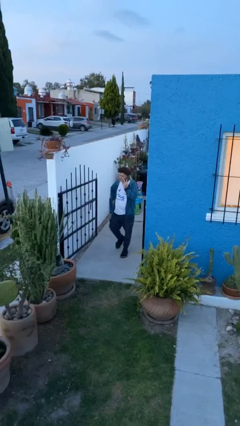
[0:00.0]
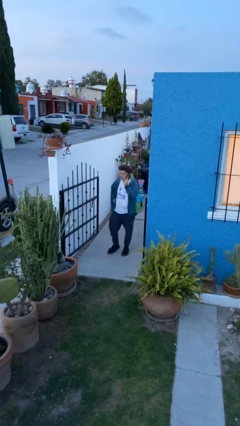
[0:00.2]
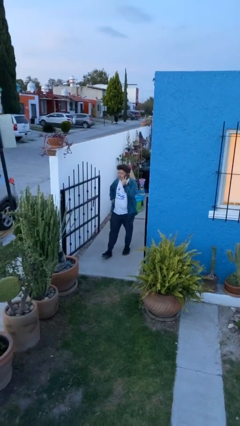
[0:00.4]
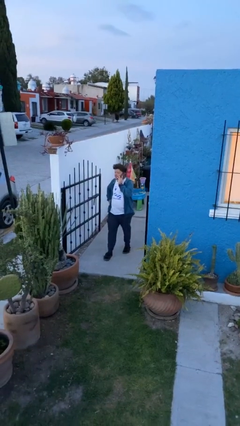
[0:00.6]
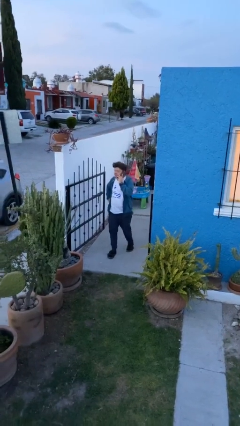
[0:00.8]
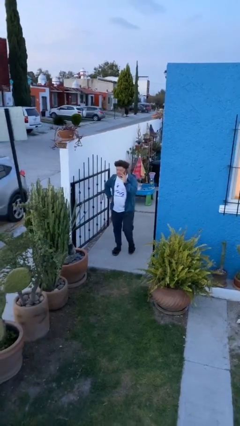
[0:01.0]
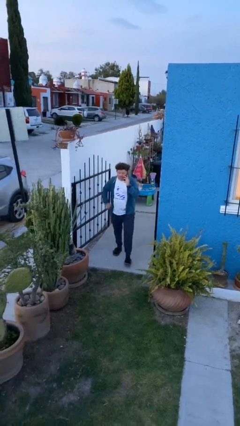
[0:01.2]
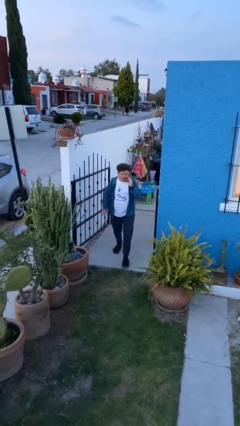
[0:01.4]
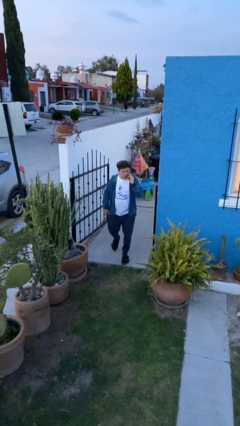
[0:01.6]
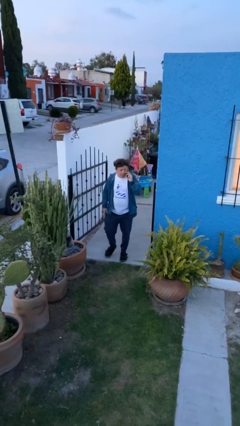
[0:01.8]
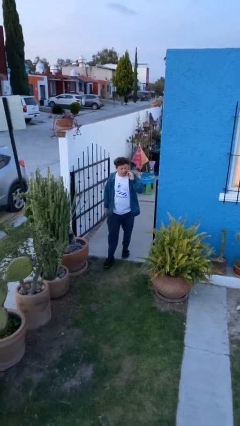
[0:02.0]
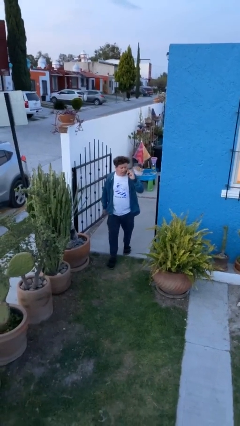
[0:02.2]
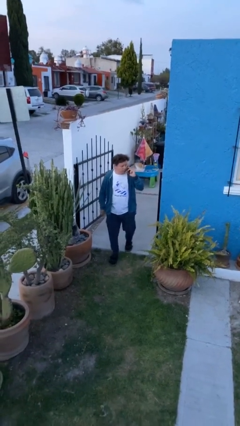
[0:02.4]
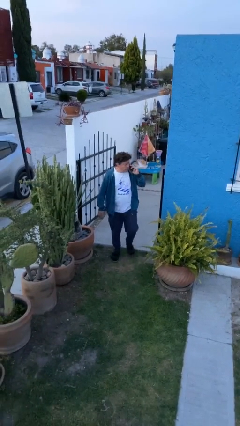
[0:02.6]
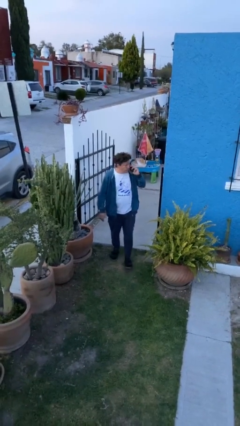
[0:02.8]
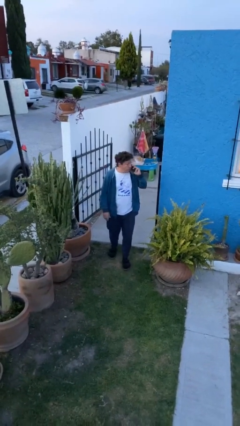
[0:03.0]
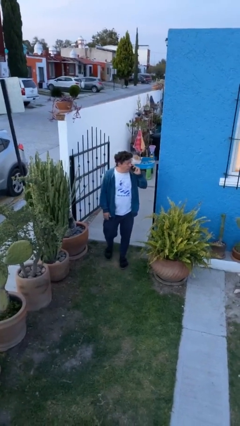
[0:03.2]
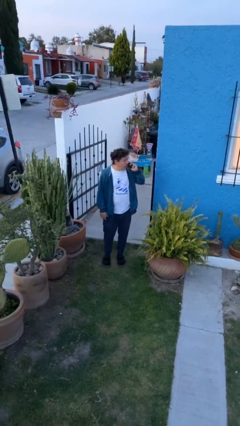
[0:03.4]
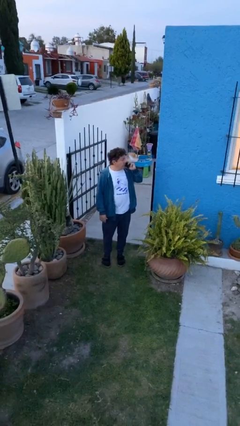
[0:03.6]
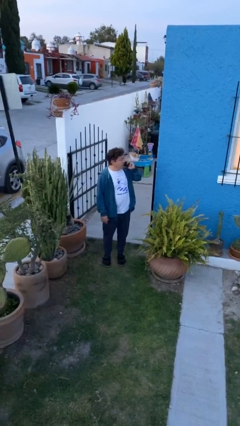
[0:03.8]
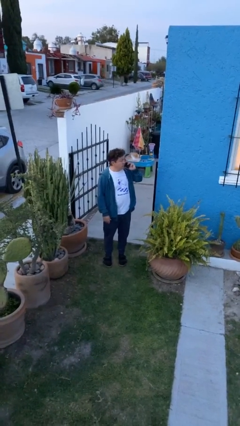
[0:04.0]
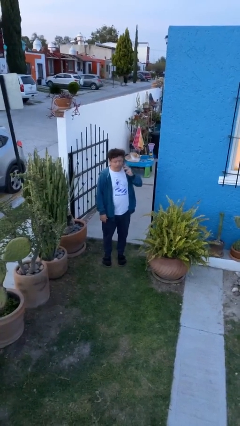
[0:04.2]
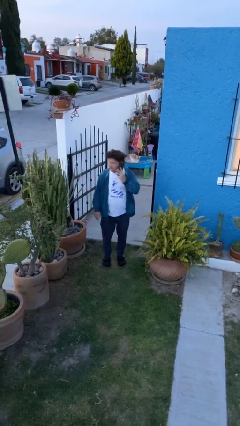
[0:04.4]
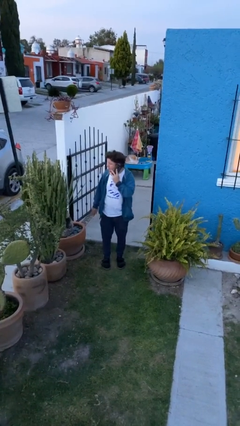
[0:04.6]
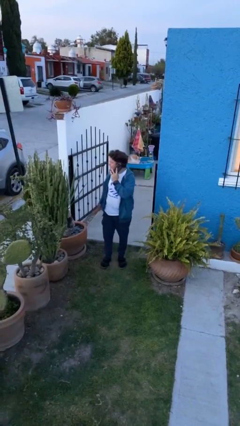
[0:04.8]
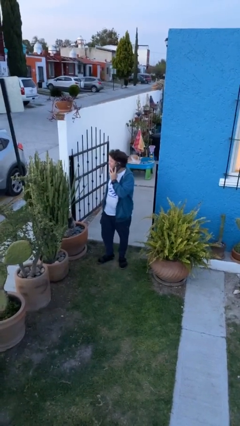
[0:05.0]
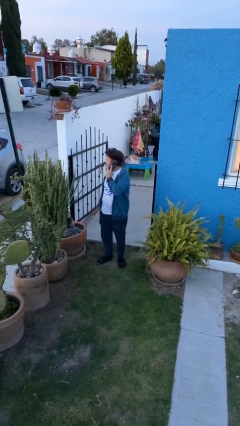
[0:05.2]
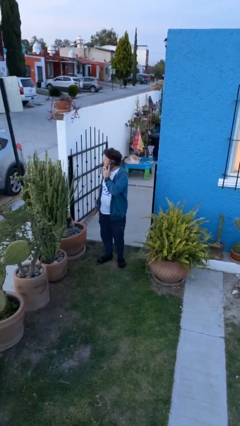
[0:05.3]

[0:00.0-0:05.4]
person enters scene through structure

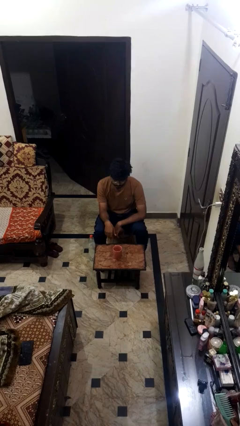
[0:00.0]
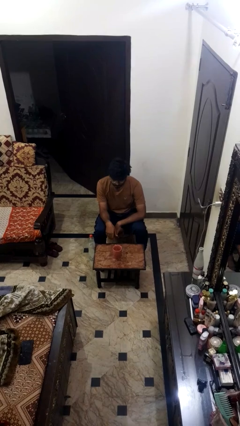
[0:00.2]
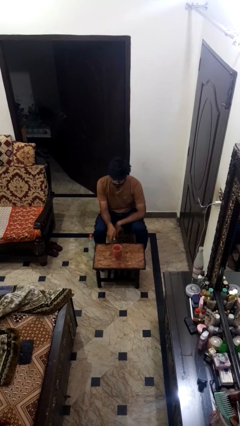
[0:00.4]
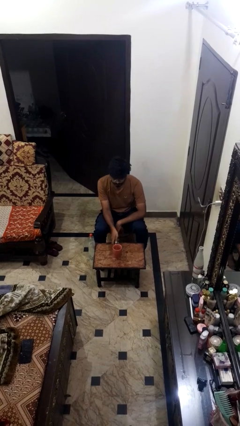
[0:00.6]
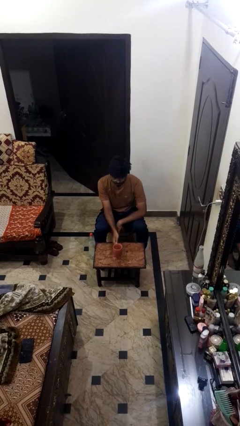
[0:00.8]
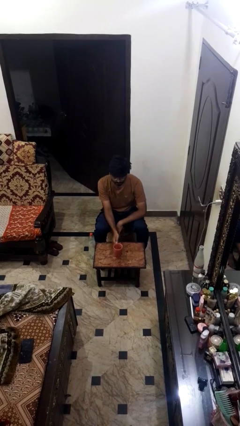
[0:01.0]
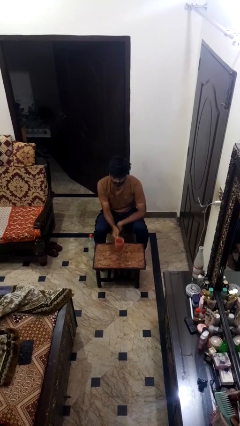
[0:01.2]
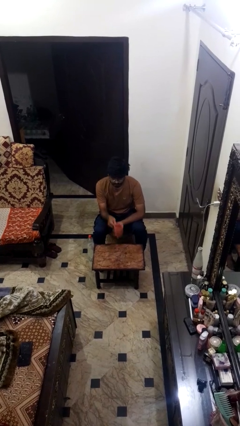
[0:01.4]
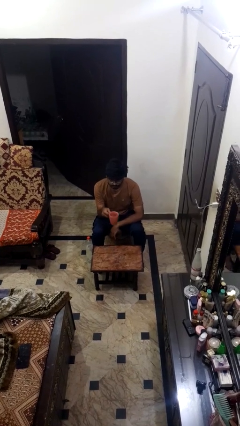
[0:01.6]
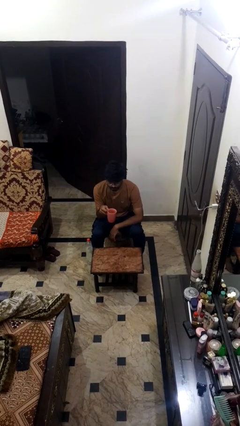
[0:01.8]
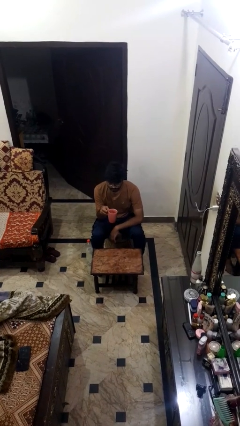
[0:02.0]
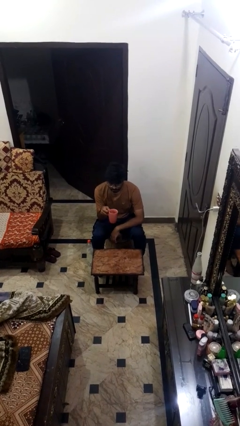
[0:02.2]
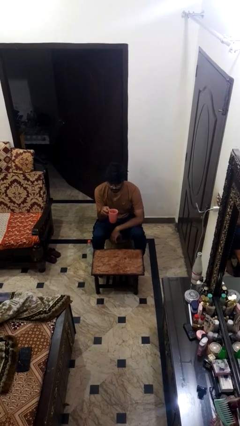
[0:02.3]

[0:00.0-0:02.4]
person picks up object from table

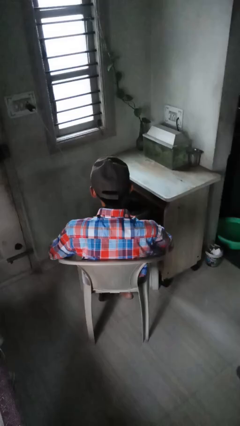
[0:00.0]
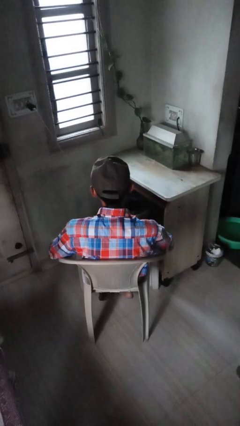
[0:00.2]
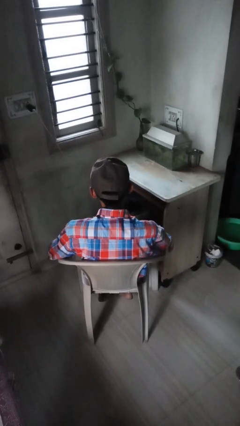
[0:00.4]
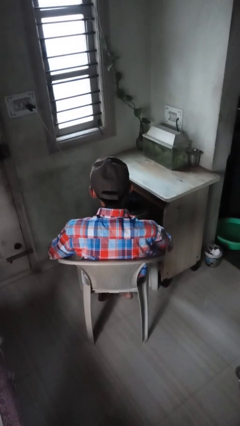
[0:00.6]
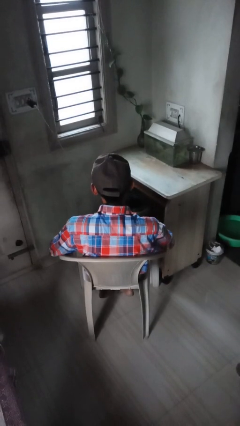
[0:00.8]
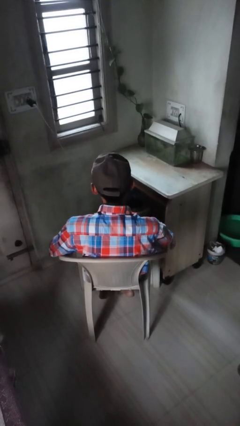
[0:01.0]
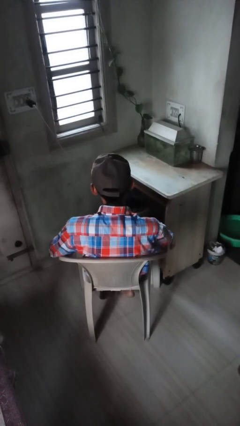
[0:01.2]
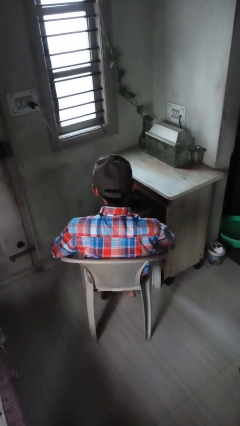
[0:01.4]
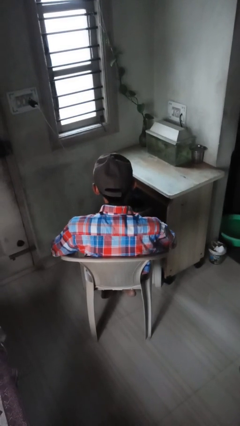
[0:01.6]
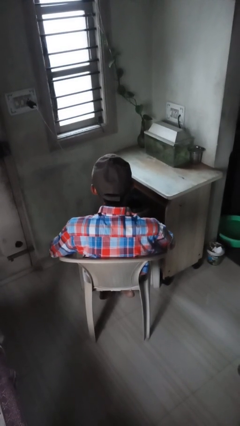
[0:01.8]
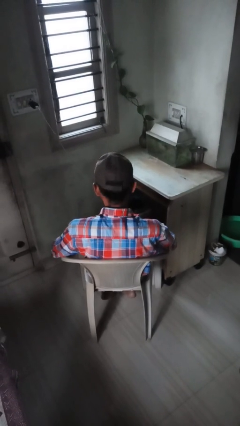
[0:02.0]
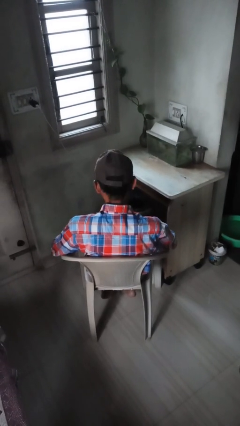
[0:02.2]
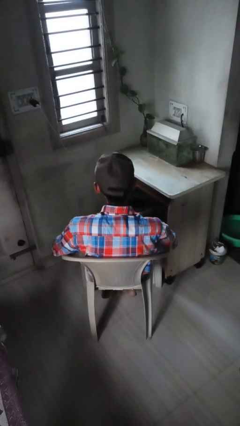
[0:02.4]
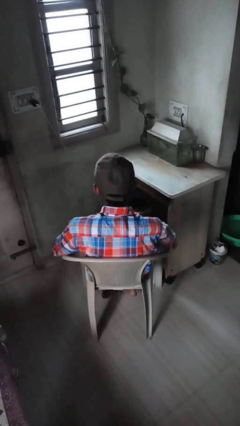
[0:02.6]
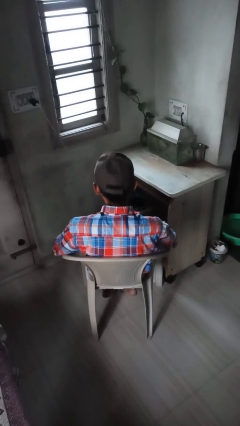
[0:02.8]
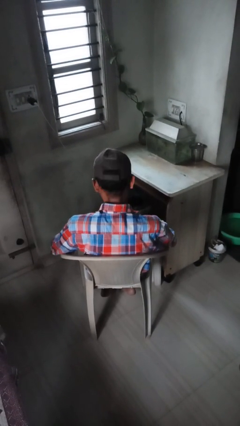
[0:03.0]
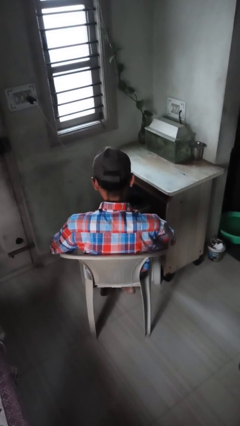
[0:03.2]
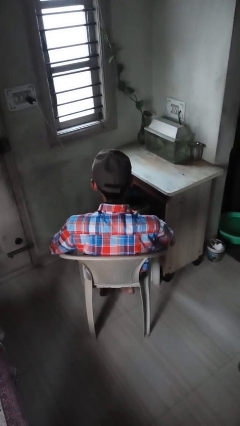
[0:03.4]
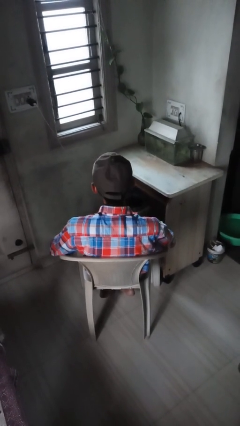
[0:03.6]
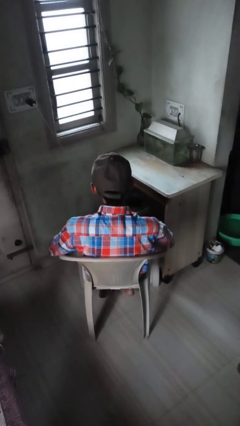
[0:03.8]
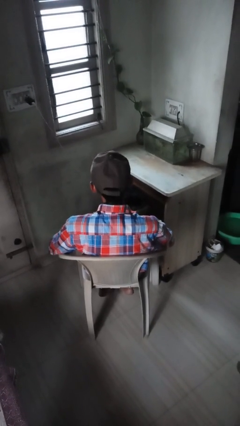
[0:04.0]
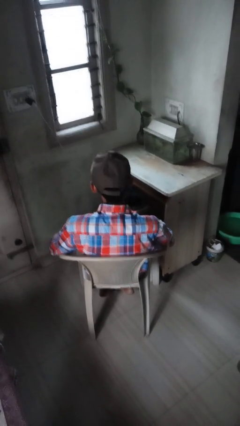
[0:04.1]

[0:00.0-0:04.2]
person nods head

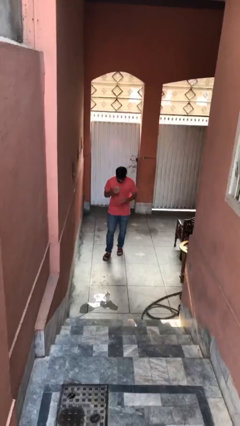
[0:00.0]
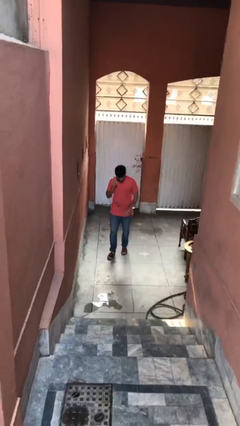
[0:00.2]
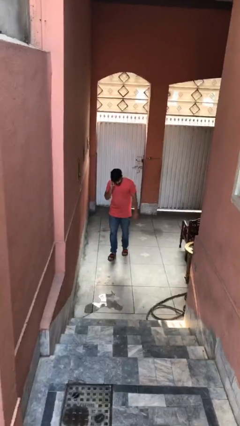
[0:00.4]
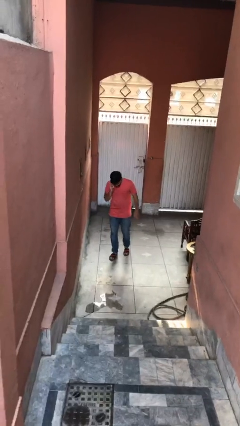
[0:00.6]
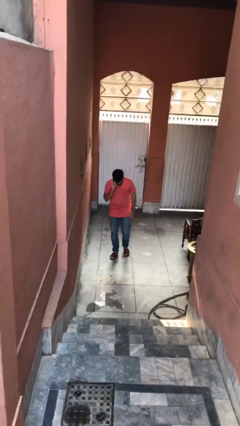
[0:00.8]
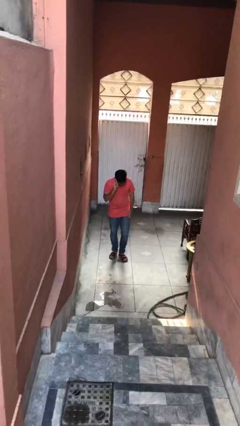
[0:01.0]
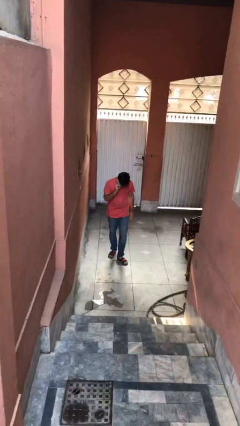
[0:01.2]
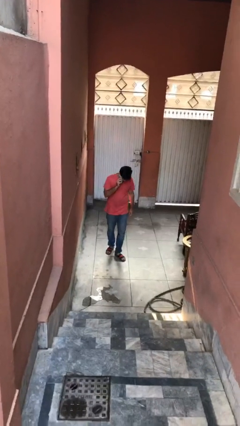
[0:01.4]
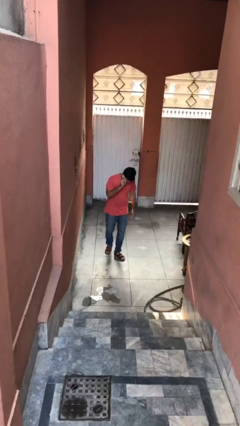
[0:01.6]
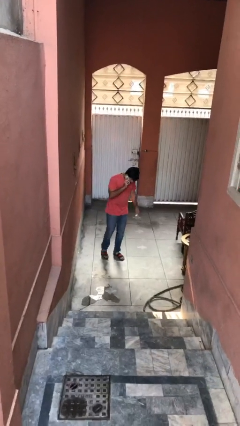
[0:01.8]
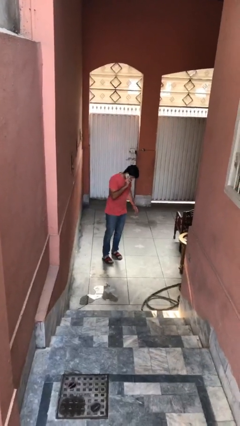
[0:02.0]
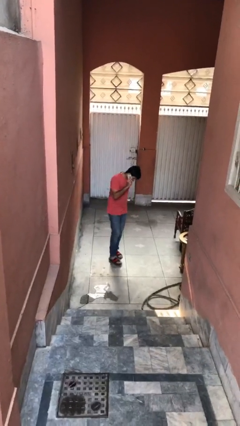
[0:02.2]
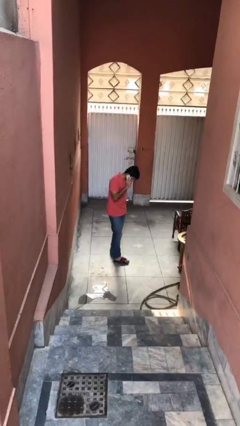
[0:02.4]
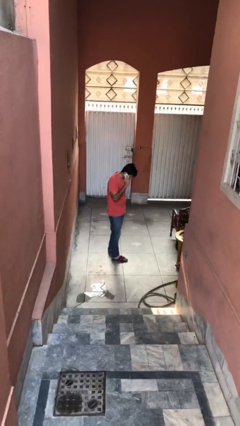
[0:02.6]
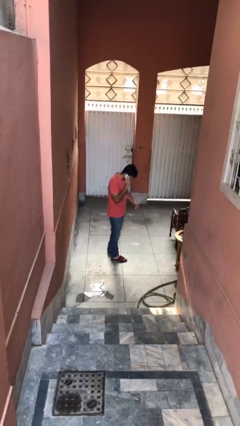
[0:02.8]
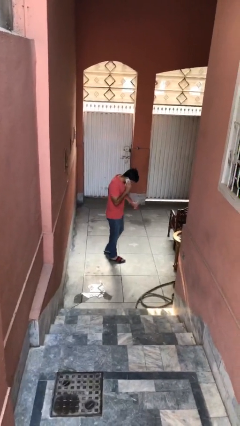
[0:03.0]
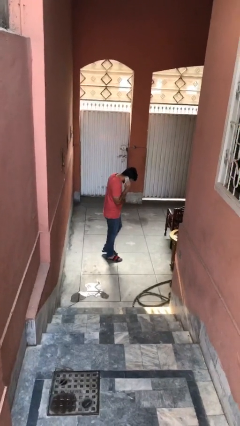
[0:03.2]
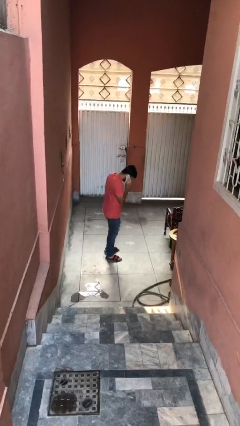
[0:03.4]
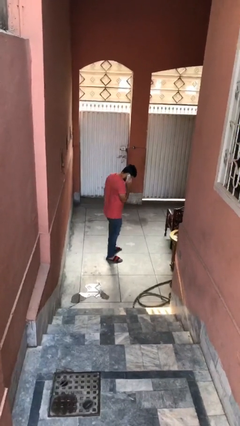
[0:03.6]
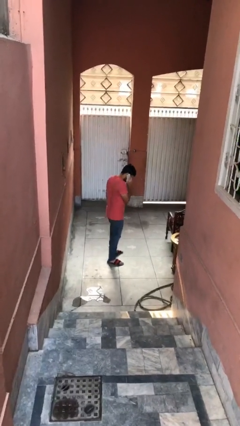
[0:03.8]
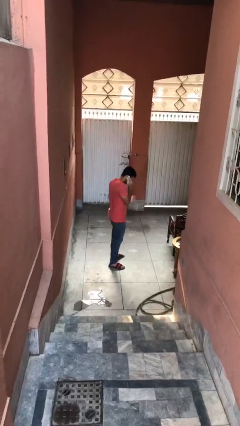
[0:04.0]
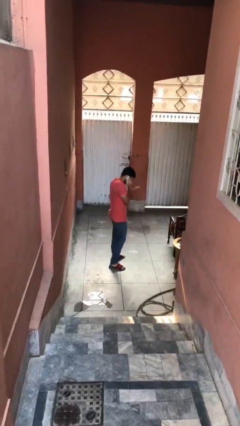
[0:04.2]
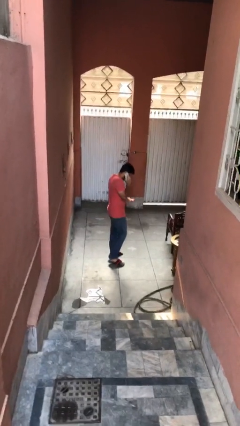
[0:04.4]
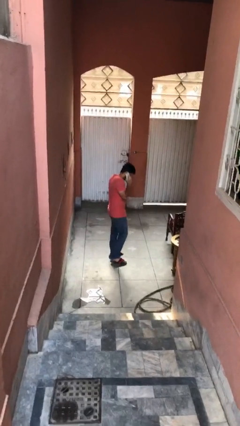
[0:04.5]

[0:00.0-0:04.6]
person talks on phone

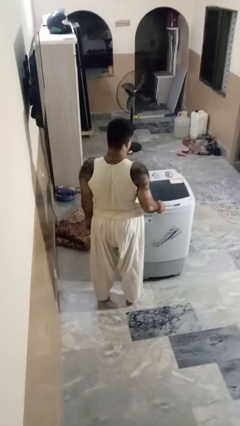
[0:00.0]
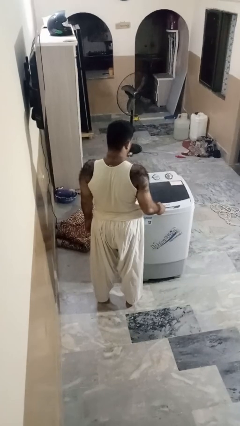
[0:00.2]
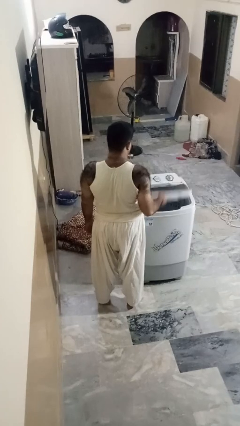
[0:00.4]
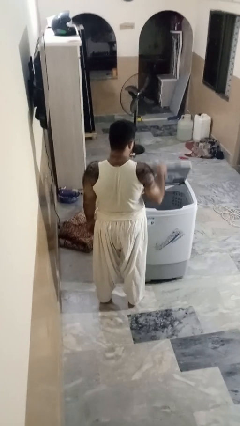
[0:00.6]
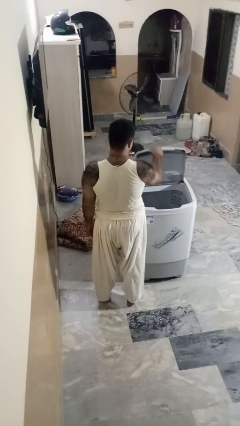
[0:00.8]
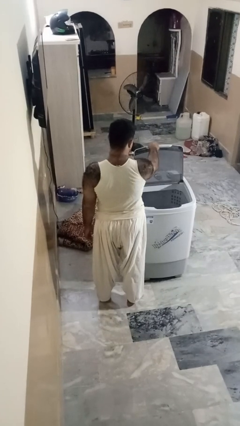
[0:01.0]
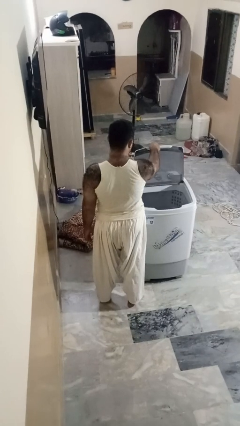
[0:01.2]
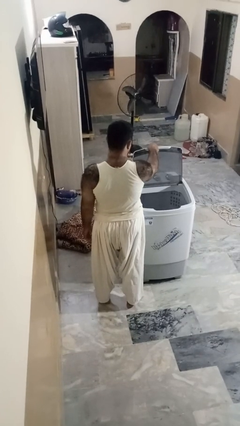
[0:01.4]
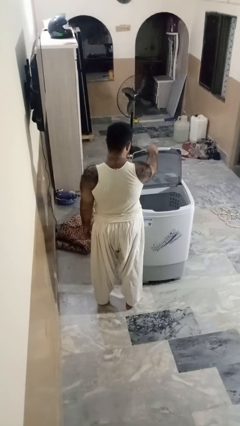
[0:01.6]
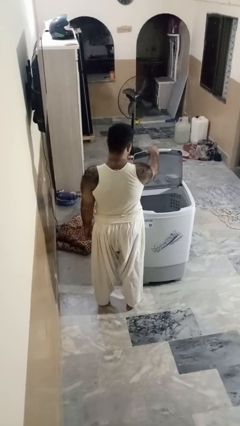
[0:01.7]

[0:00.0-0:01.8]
person opens clothes washer
